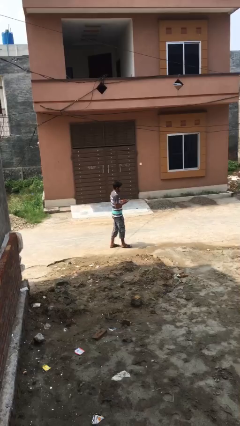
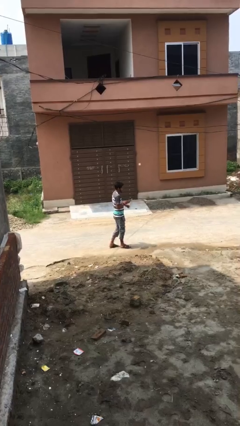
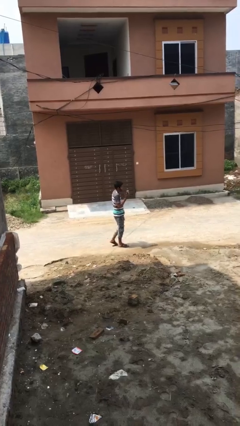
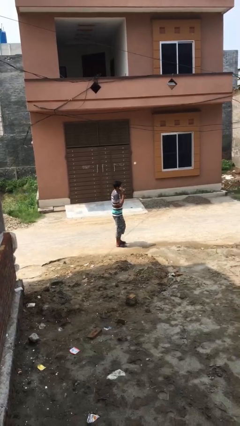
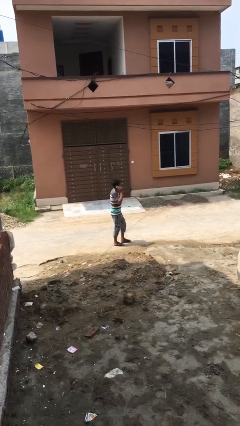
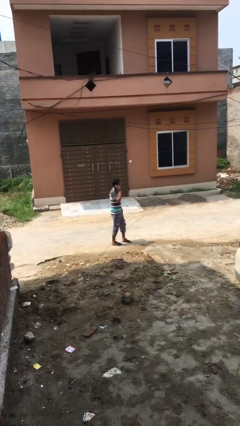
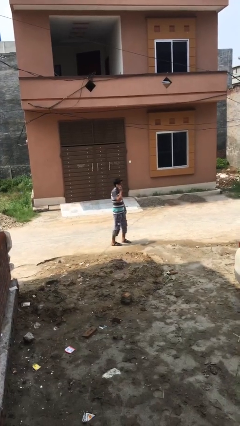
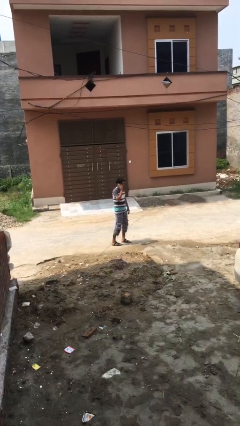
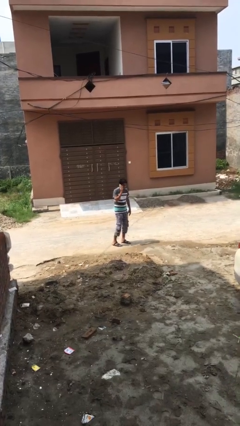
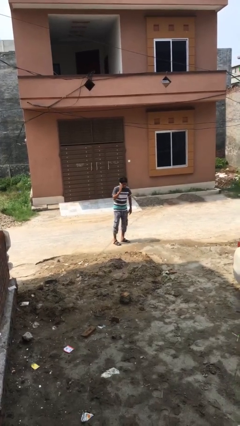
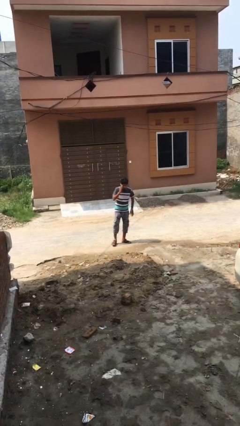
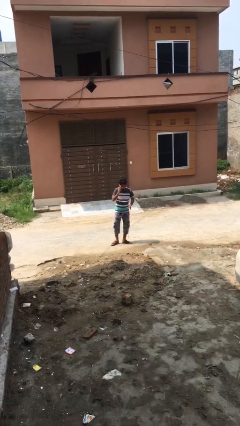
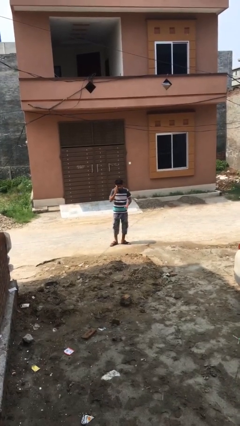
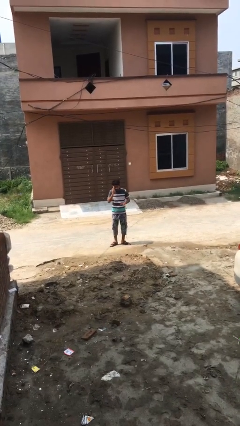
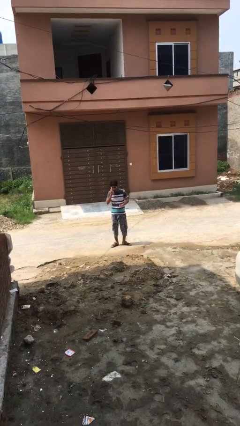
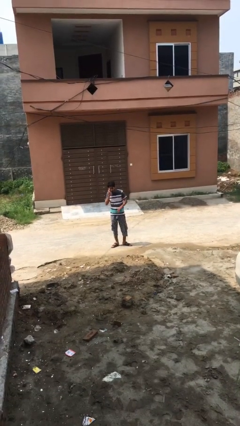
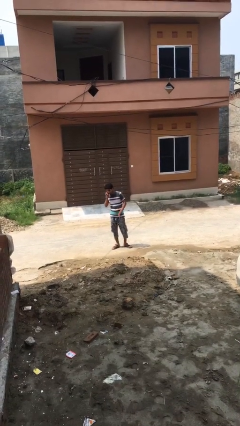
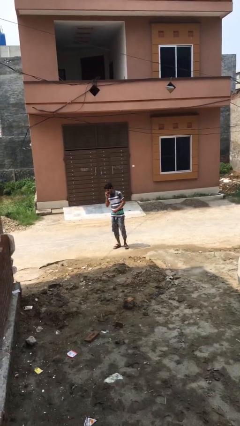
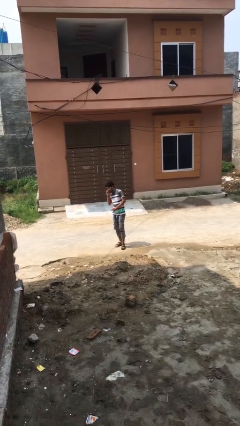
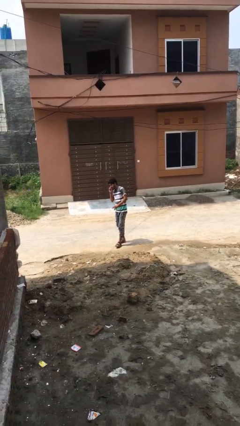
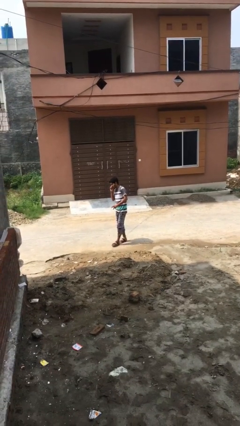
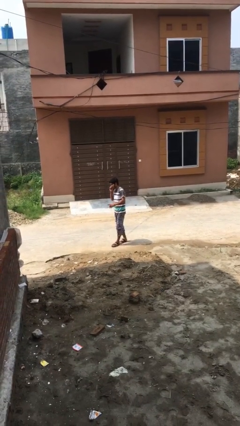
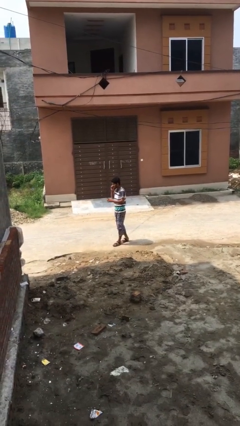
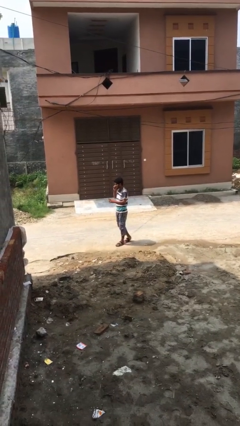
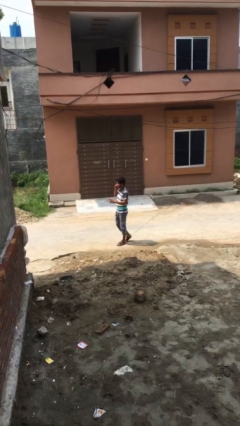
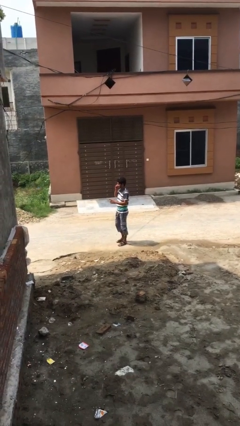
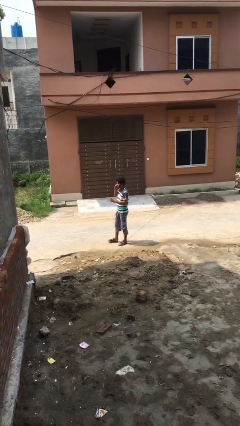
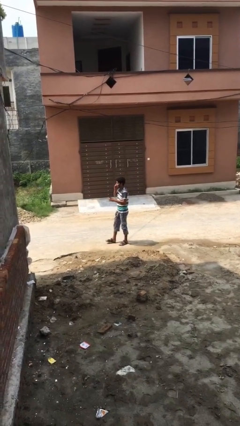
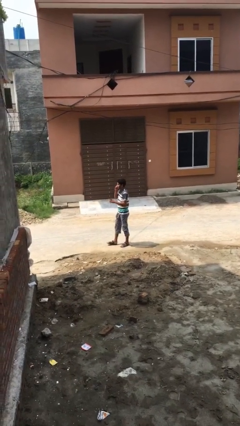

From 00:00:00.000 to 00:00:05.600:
person talks on phone

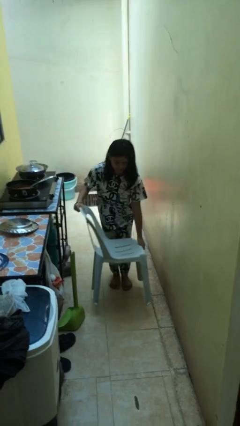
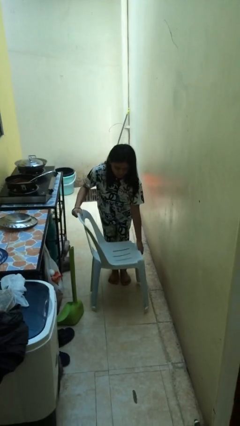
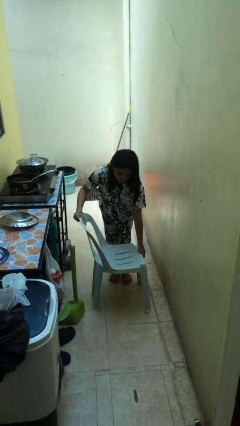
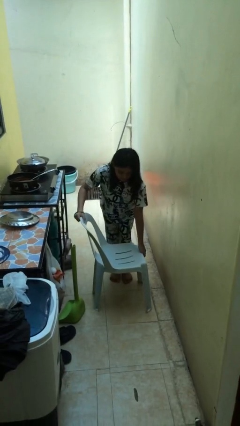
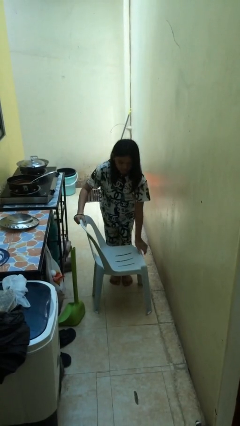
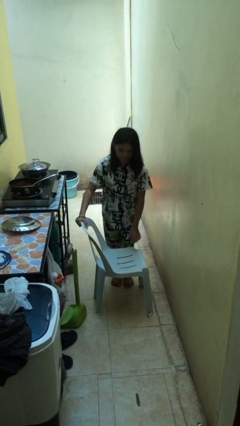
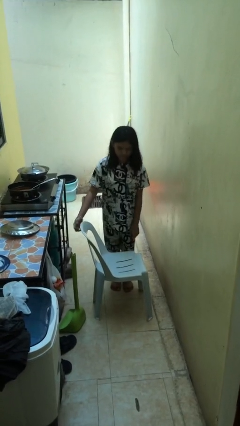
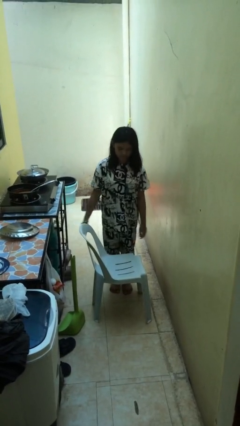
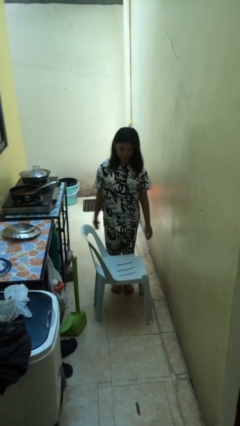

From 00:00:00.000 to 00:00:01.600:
person puts down object on floor

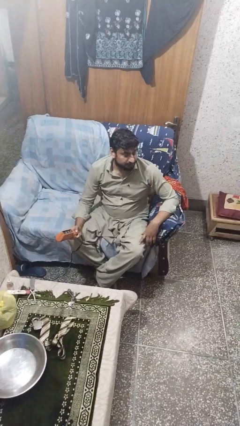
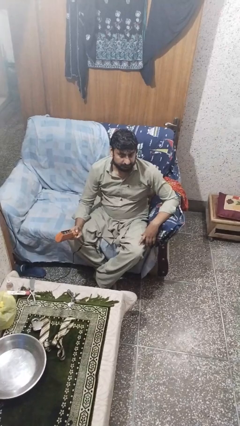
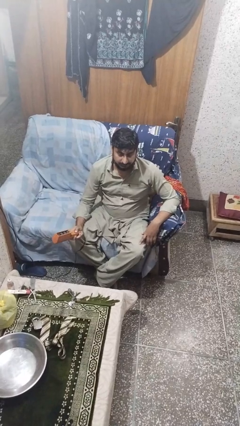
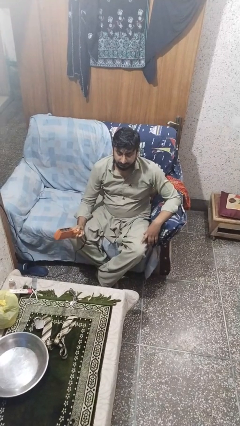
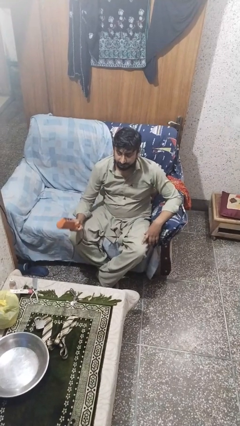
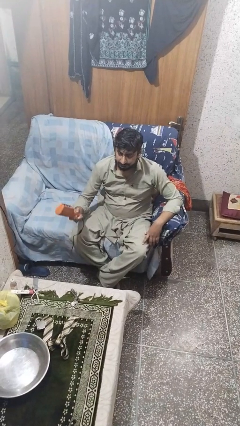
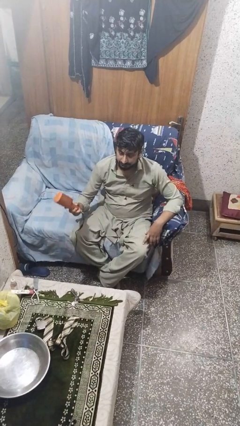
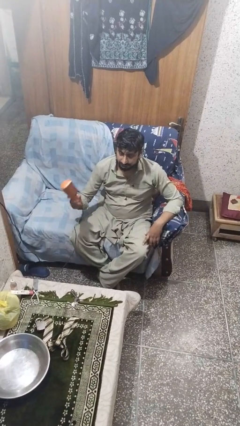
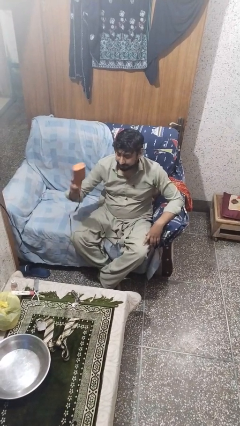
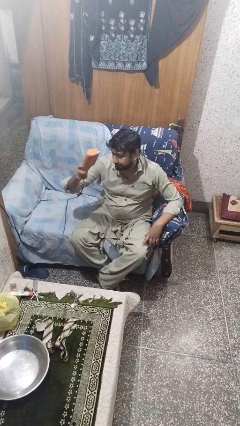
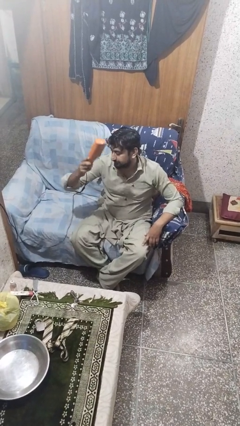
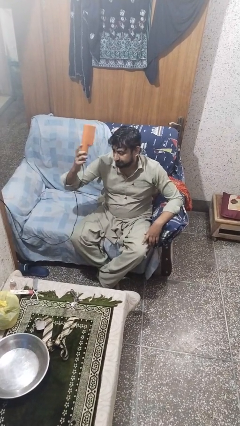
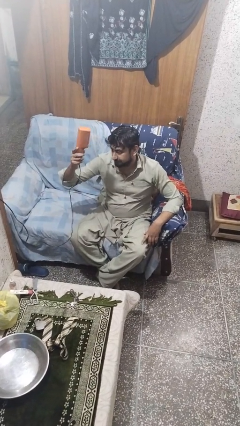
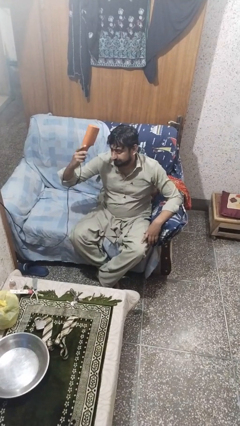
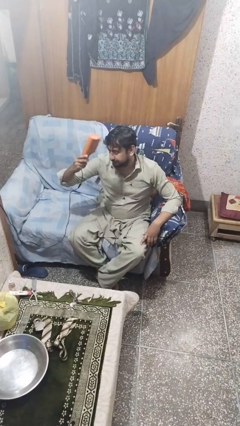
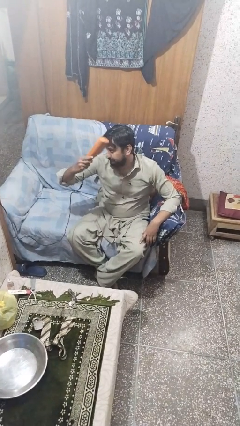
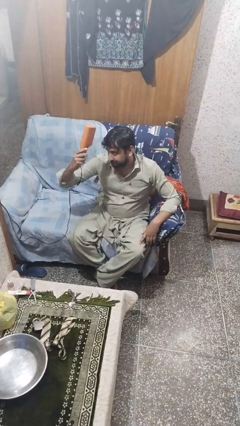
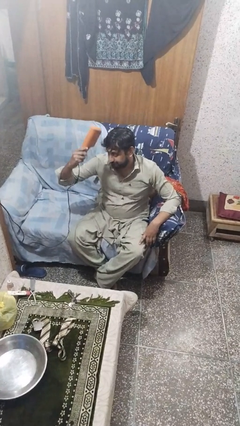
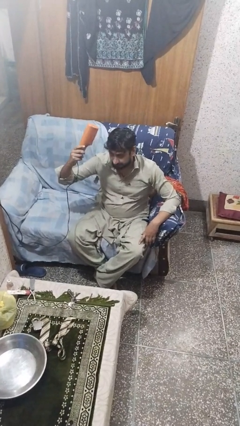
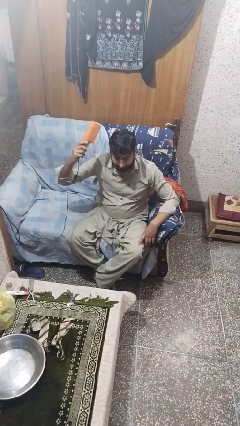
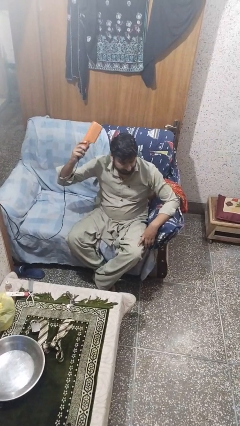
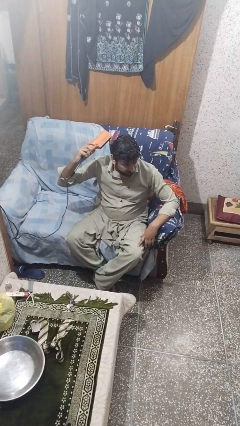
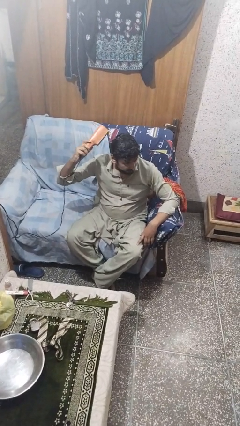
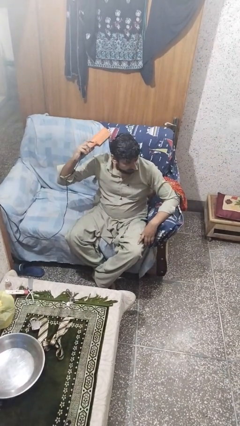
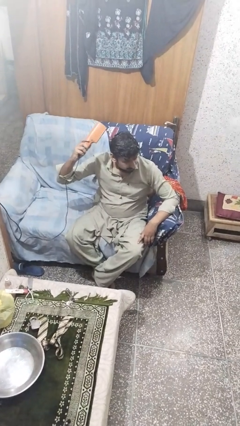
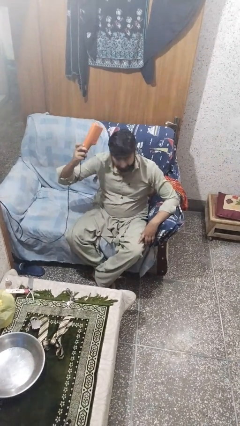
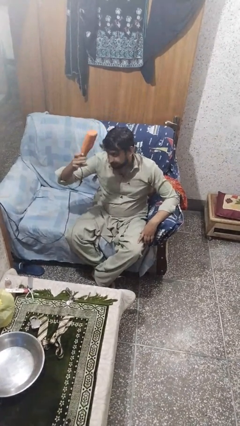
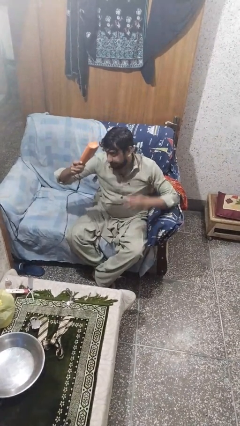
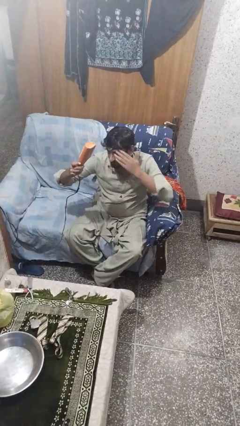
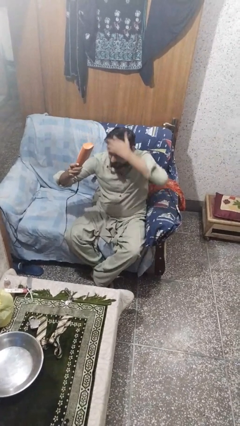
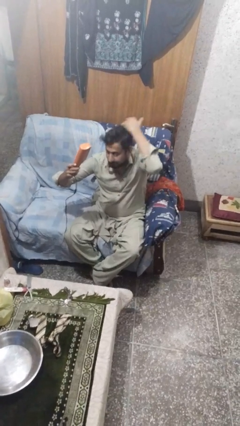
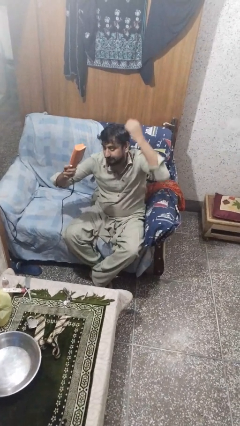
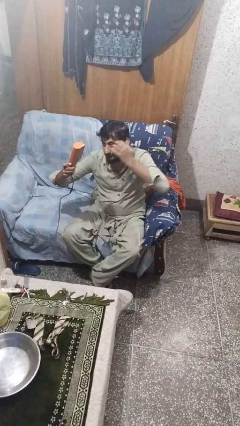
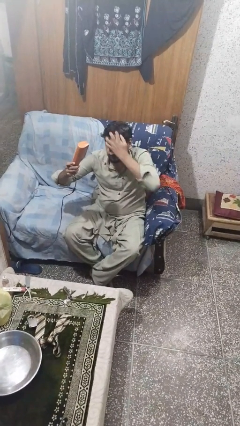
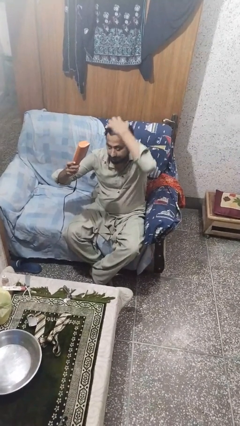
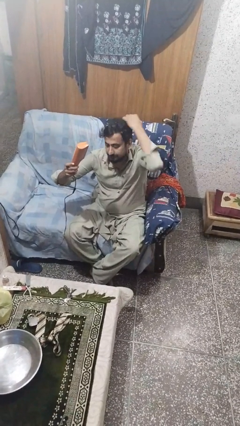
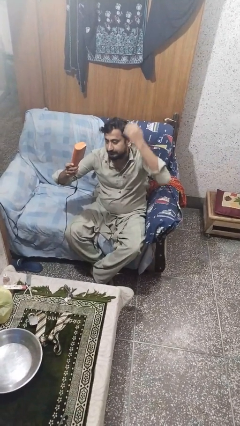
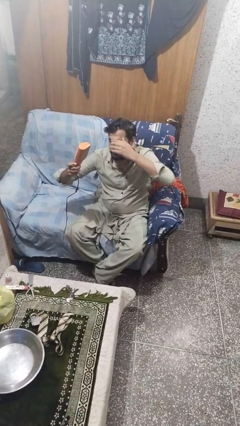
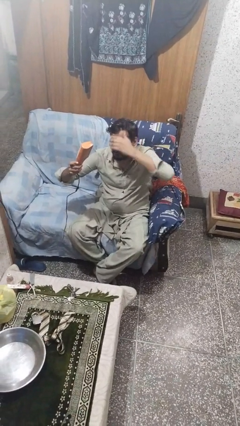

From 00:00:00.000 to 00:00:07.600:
person dries hair with hairdryer

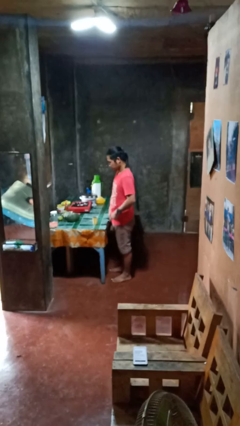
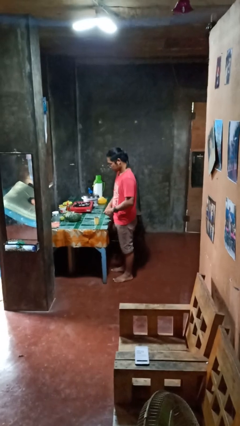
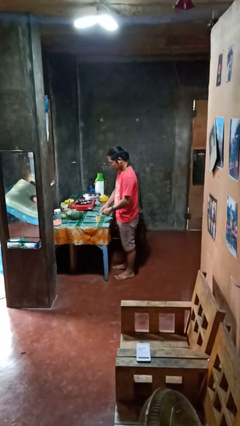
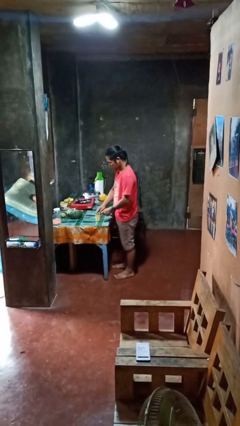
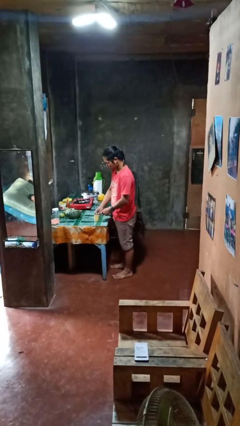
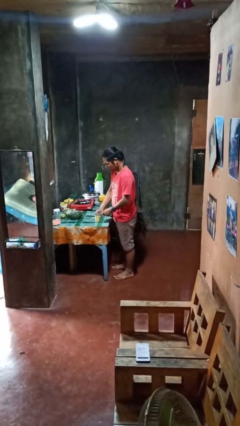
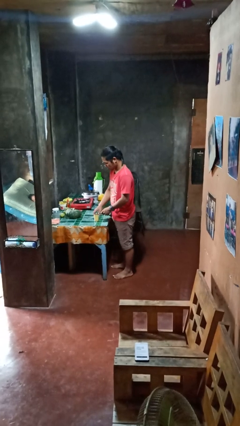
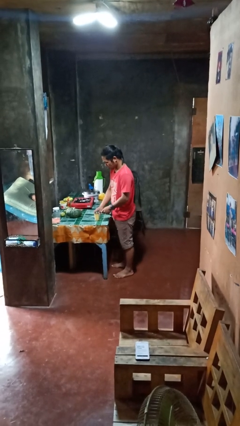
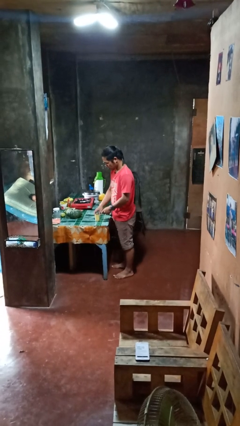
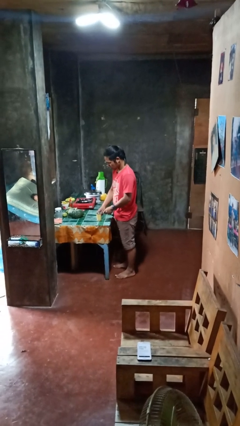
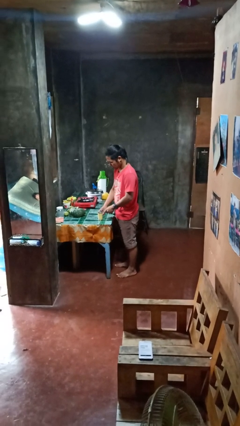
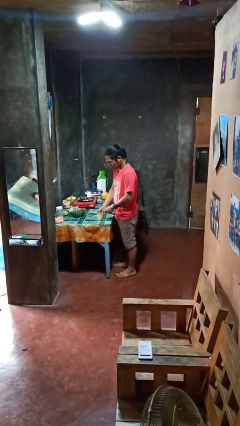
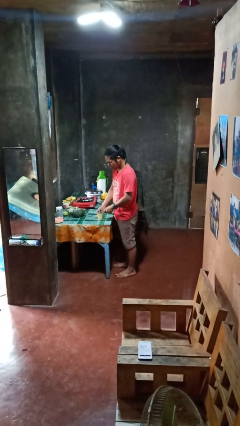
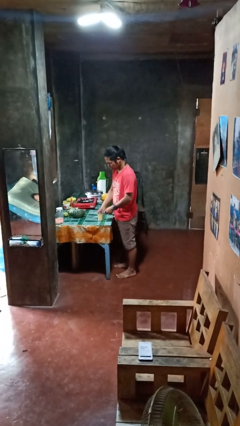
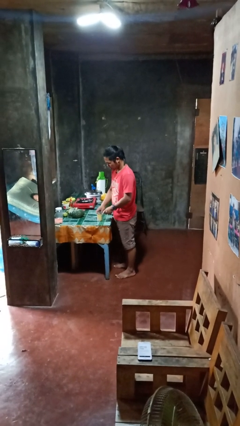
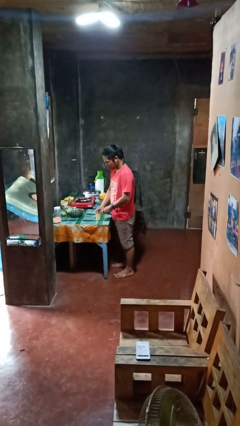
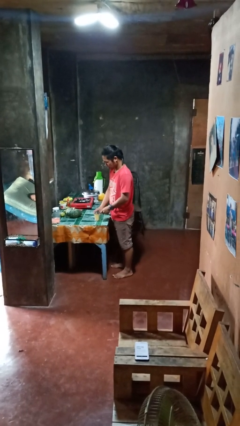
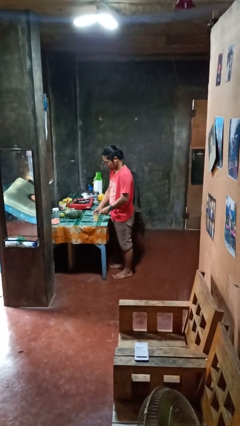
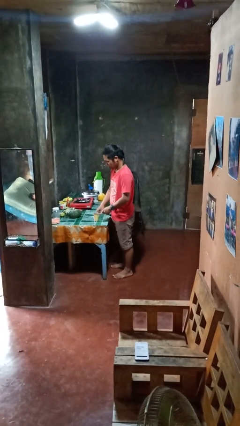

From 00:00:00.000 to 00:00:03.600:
person opens can with can opener
